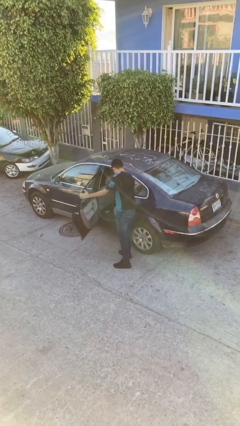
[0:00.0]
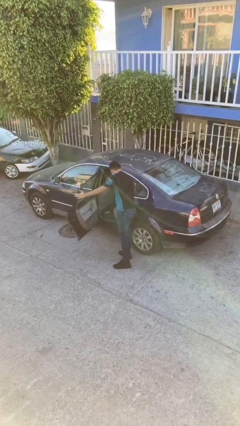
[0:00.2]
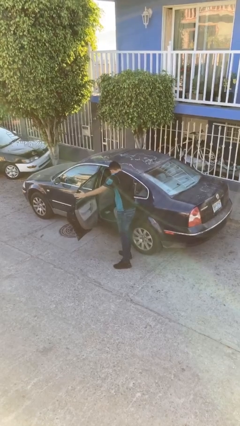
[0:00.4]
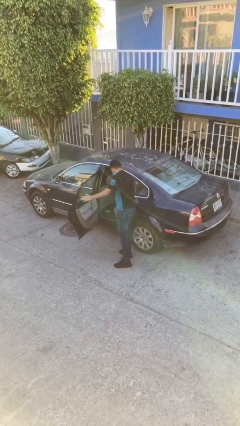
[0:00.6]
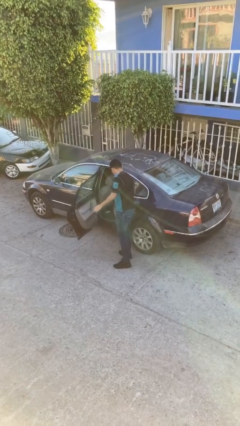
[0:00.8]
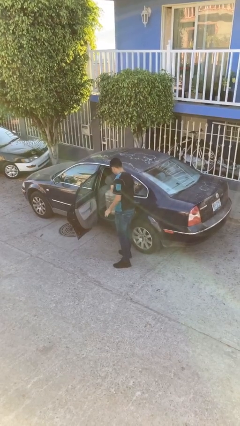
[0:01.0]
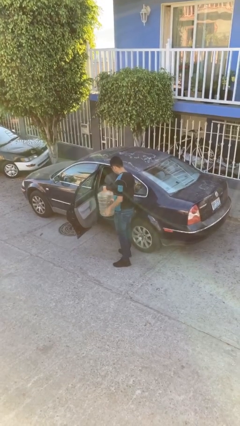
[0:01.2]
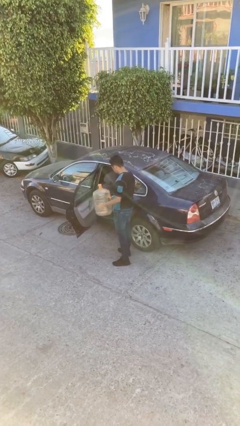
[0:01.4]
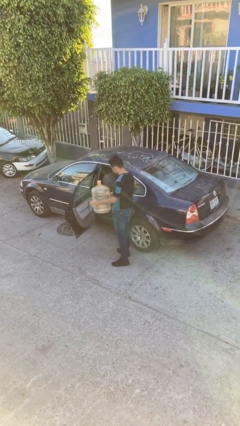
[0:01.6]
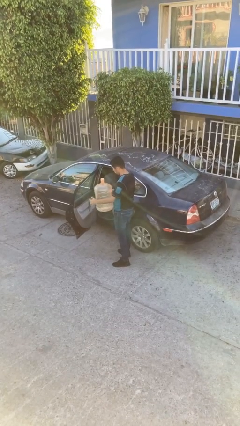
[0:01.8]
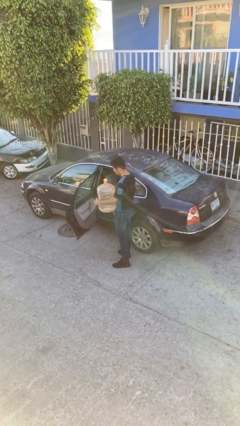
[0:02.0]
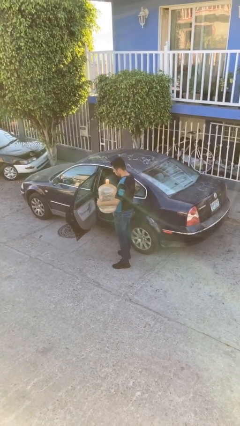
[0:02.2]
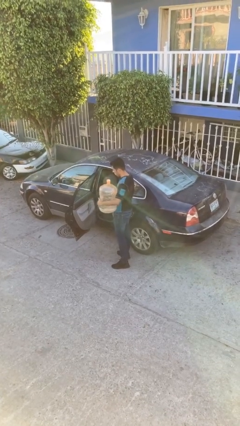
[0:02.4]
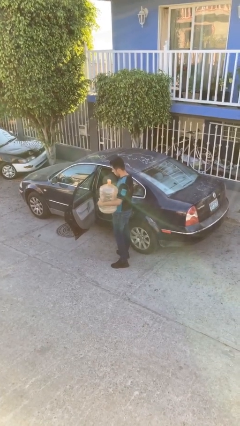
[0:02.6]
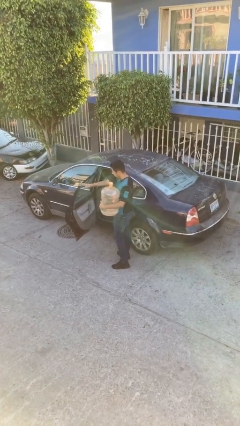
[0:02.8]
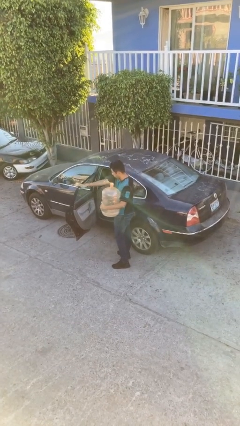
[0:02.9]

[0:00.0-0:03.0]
person unloads car

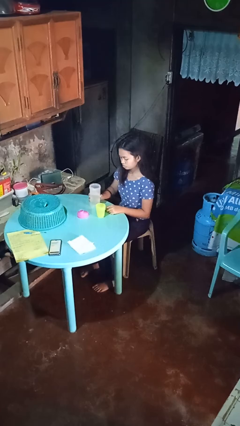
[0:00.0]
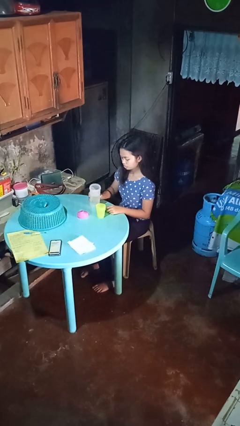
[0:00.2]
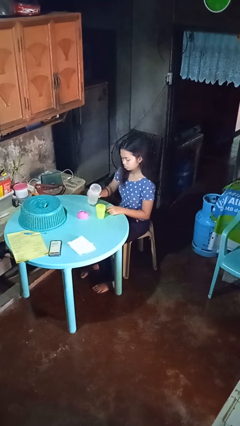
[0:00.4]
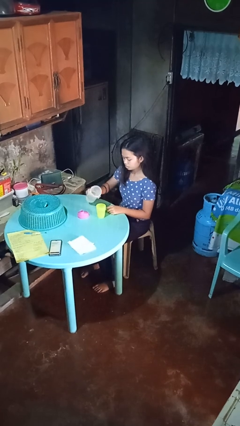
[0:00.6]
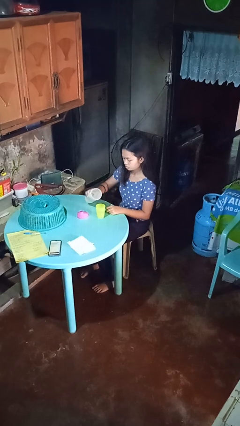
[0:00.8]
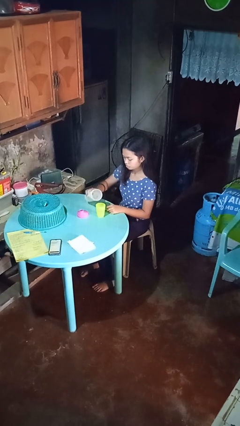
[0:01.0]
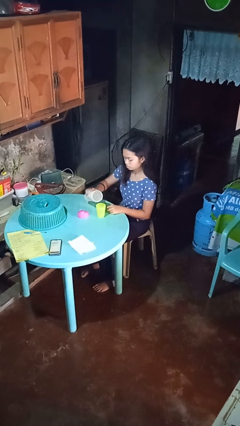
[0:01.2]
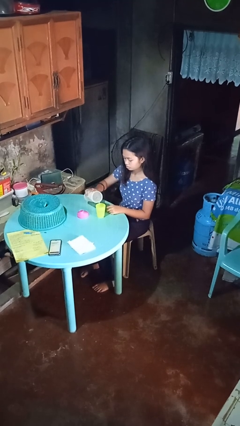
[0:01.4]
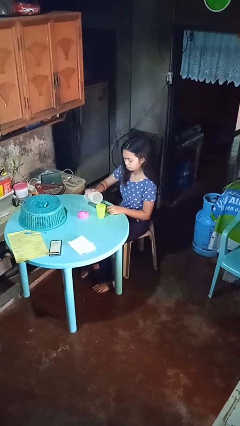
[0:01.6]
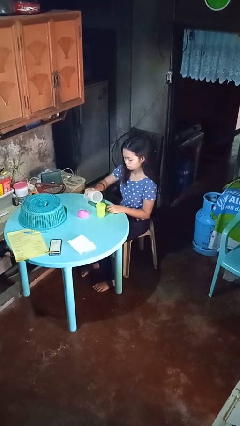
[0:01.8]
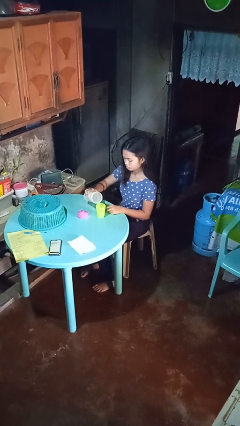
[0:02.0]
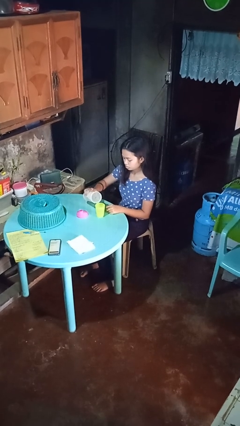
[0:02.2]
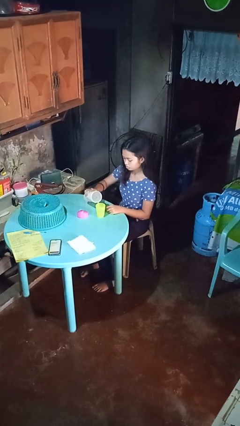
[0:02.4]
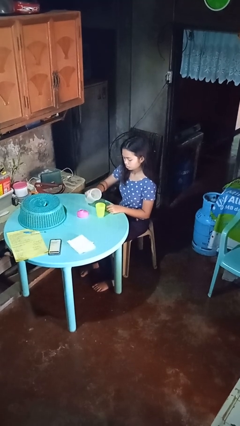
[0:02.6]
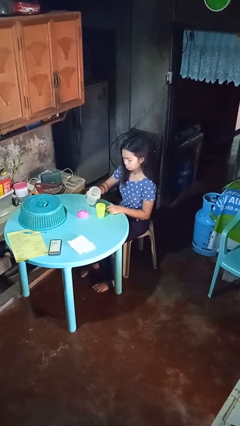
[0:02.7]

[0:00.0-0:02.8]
person pours liquid into cup

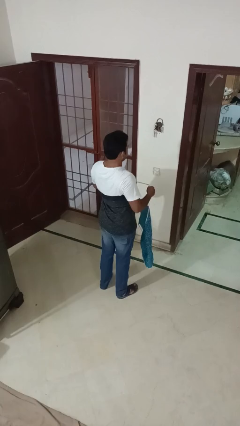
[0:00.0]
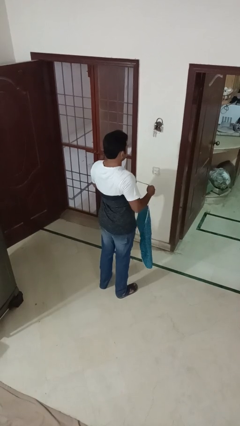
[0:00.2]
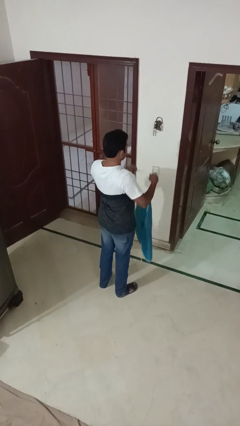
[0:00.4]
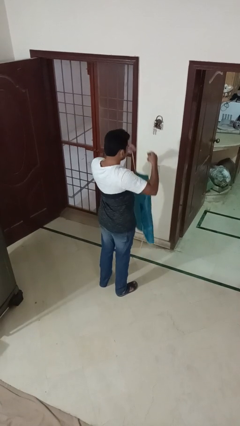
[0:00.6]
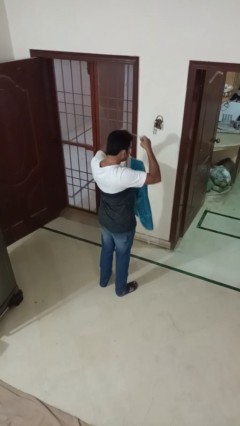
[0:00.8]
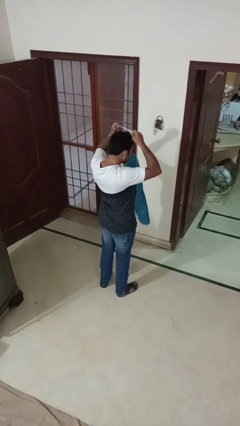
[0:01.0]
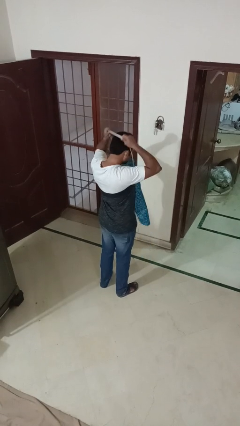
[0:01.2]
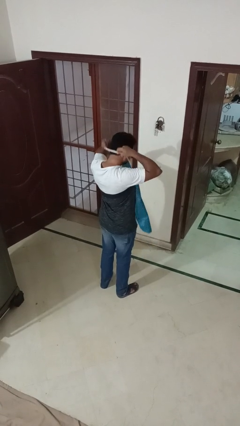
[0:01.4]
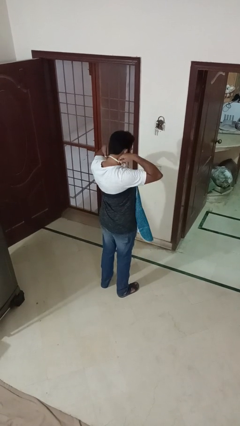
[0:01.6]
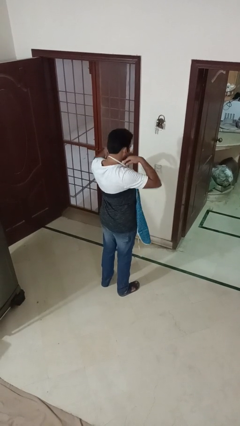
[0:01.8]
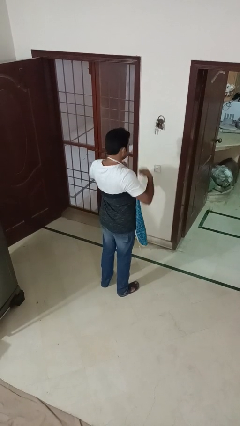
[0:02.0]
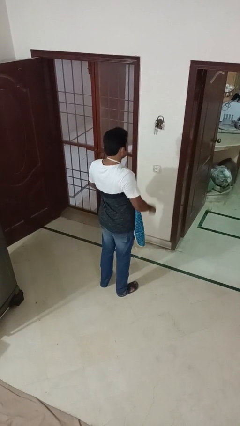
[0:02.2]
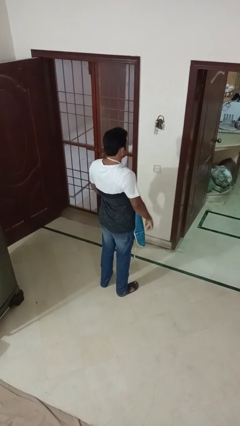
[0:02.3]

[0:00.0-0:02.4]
person puts on apron

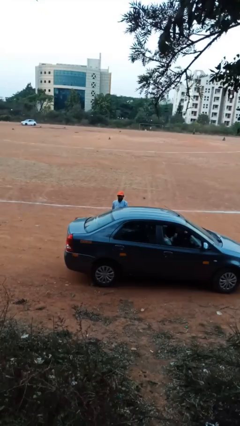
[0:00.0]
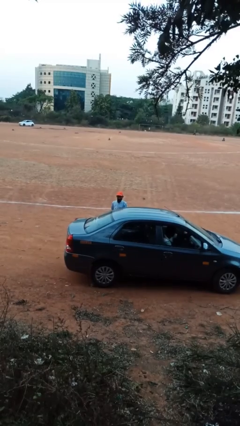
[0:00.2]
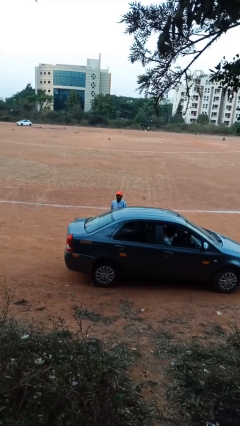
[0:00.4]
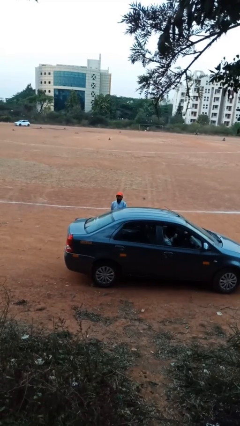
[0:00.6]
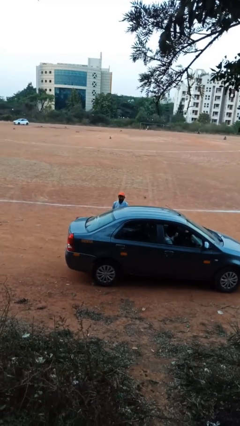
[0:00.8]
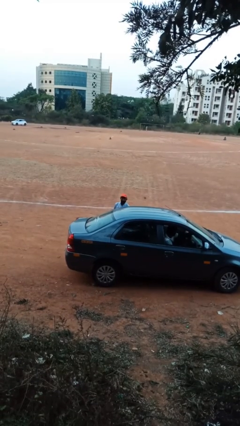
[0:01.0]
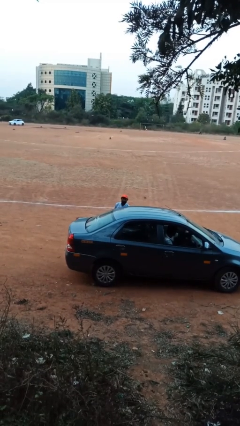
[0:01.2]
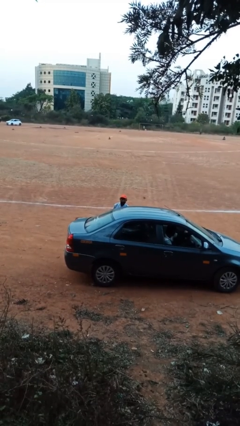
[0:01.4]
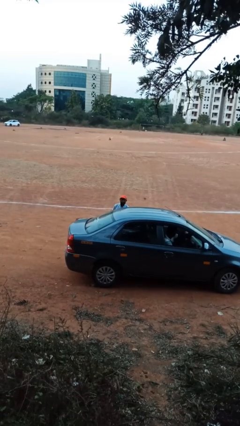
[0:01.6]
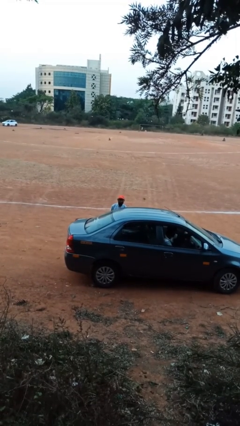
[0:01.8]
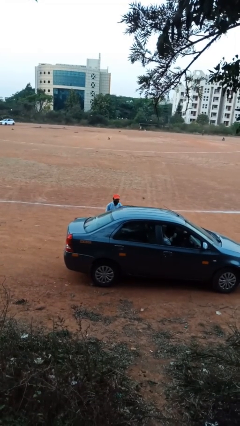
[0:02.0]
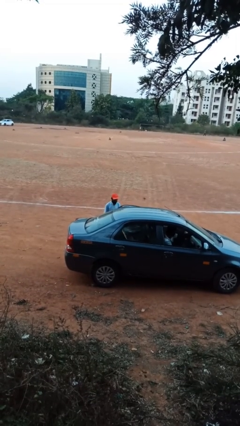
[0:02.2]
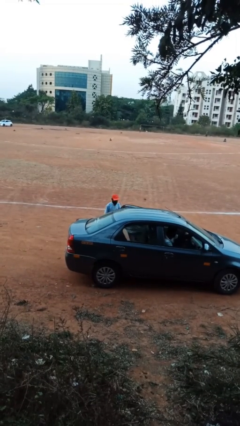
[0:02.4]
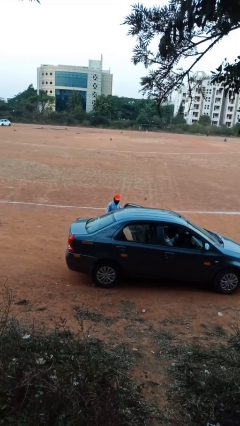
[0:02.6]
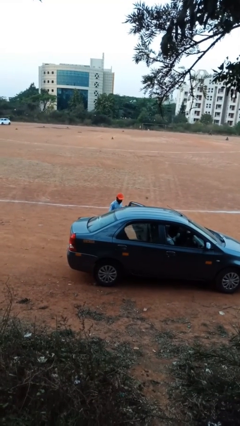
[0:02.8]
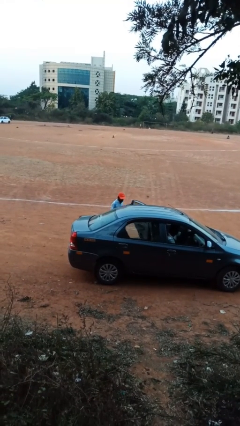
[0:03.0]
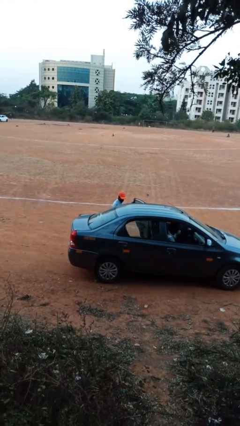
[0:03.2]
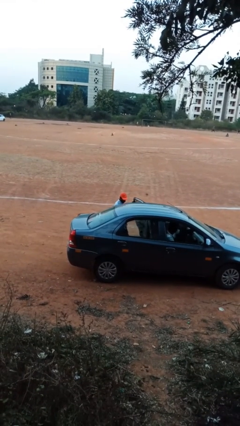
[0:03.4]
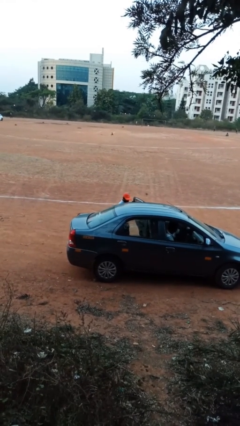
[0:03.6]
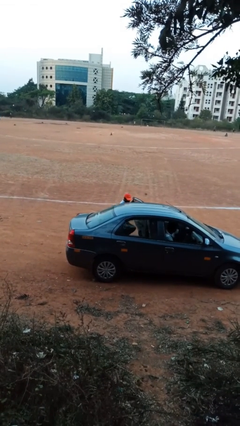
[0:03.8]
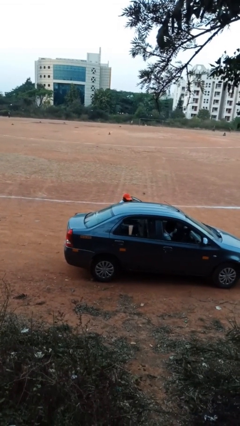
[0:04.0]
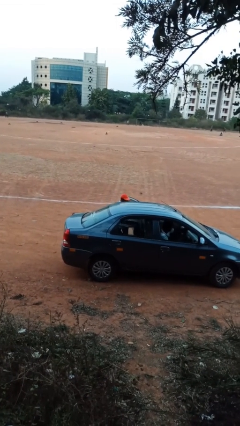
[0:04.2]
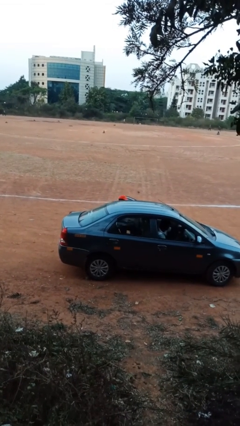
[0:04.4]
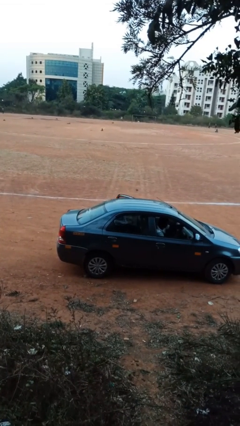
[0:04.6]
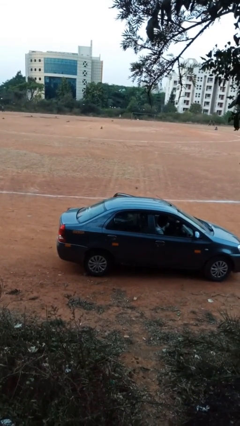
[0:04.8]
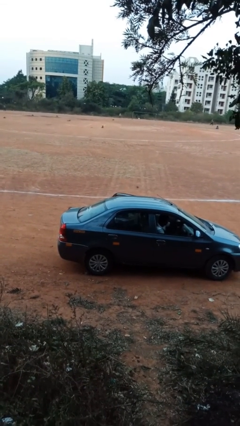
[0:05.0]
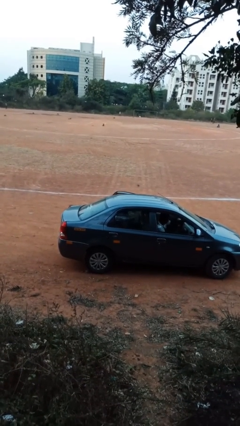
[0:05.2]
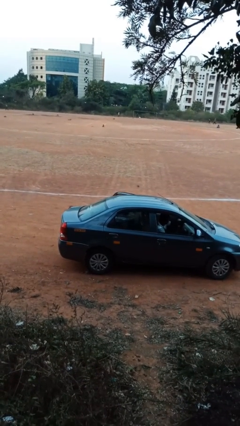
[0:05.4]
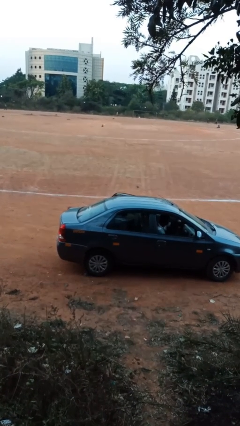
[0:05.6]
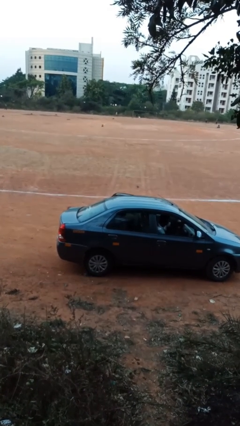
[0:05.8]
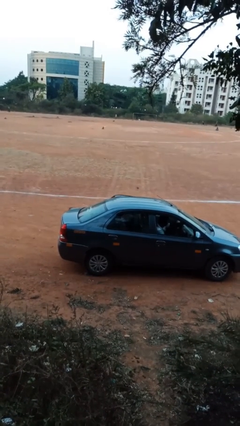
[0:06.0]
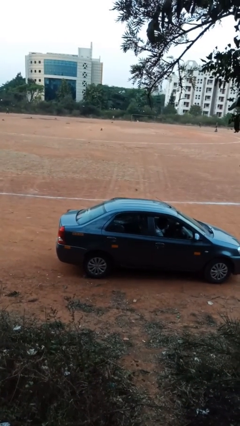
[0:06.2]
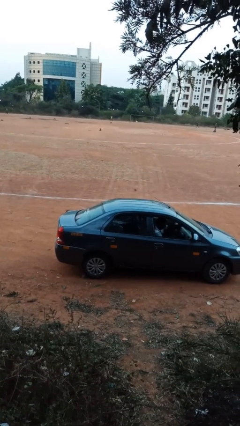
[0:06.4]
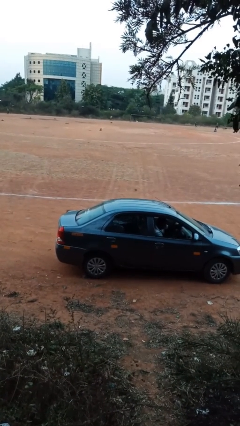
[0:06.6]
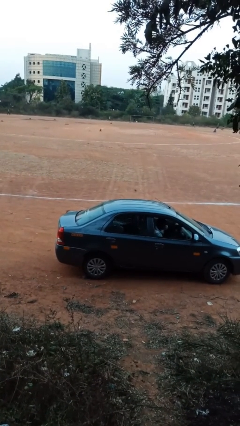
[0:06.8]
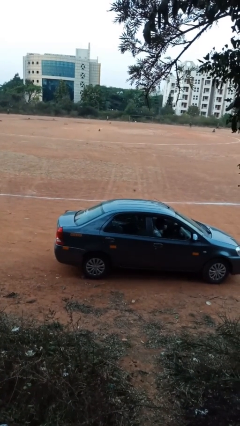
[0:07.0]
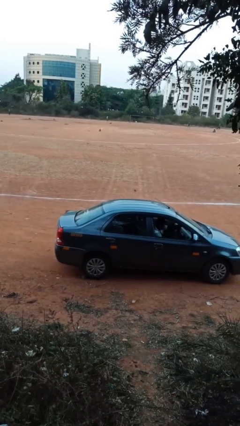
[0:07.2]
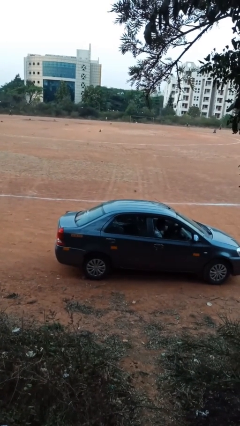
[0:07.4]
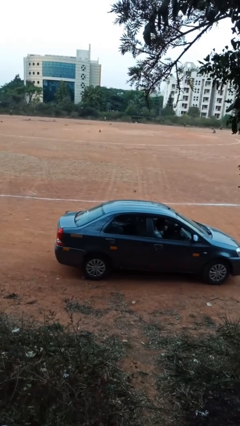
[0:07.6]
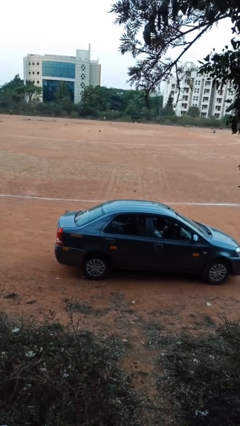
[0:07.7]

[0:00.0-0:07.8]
person enters car

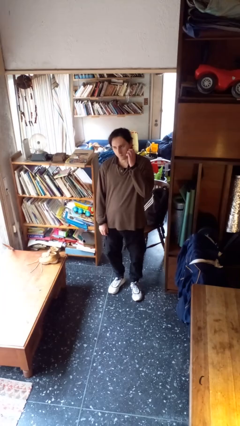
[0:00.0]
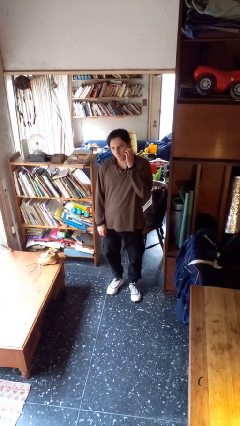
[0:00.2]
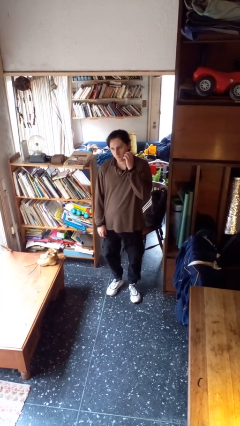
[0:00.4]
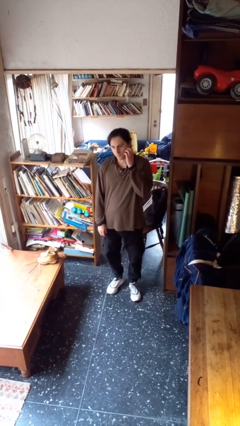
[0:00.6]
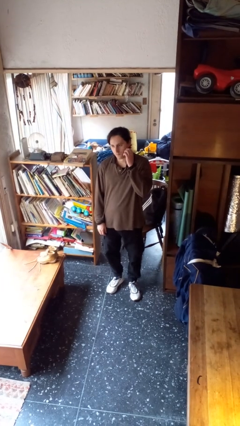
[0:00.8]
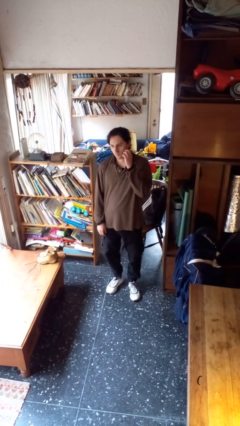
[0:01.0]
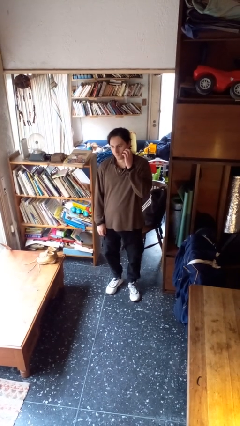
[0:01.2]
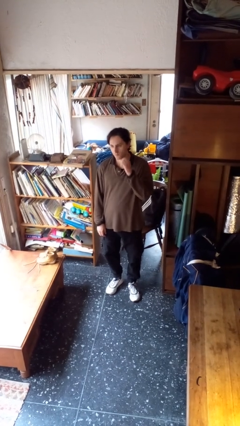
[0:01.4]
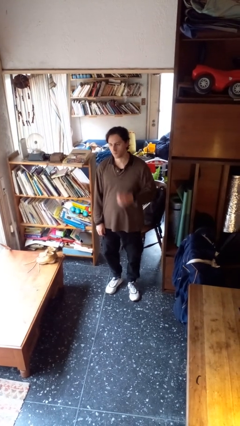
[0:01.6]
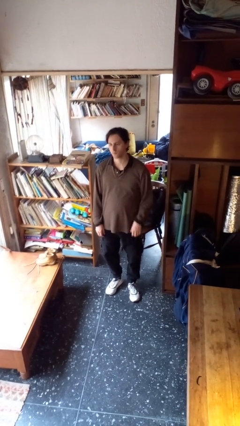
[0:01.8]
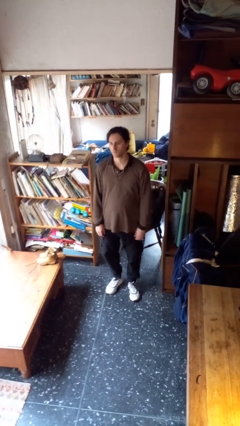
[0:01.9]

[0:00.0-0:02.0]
person scratches face

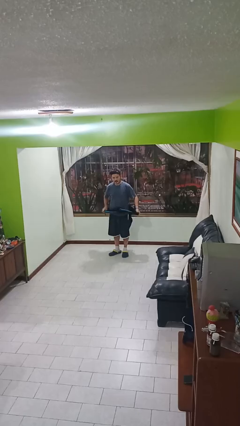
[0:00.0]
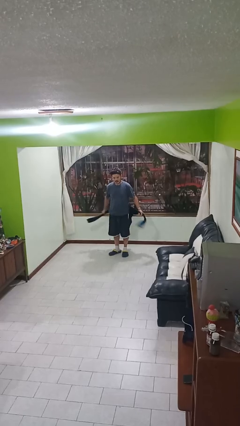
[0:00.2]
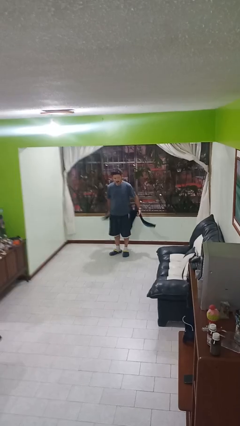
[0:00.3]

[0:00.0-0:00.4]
person unties jacket around waist
